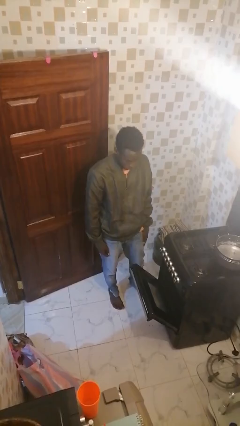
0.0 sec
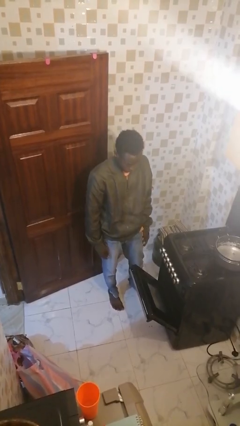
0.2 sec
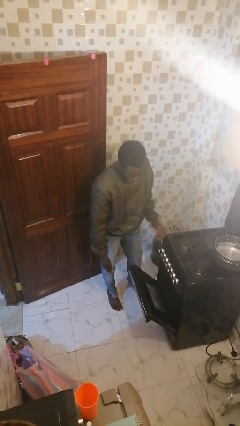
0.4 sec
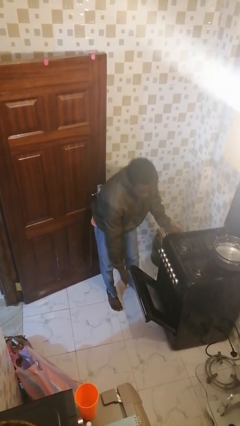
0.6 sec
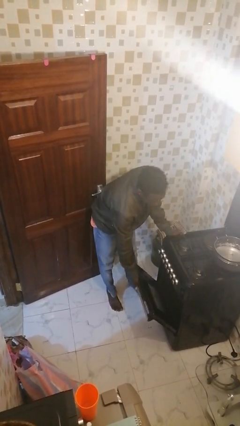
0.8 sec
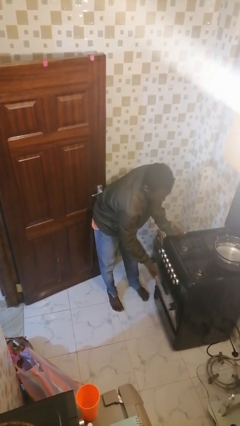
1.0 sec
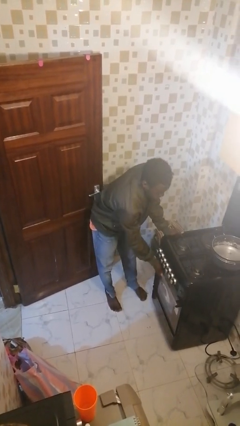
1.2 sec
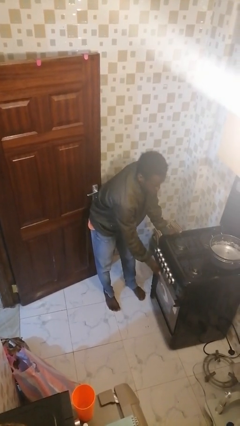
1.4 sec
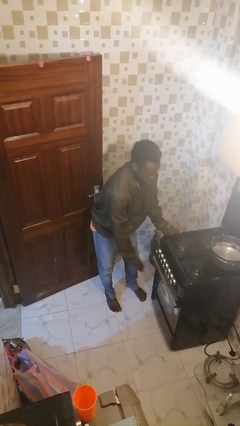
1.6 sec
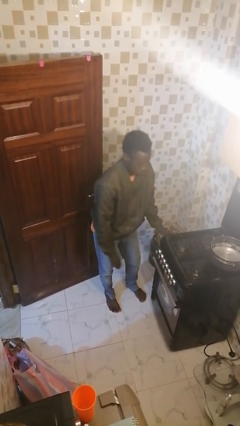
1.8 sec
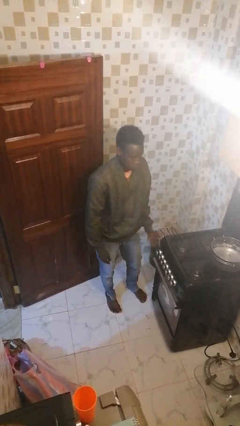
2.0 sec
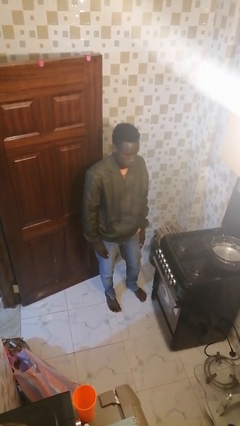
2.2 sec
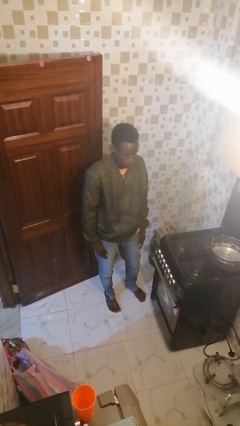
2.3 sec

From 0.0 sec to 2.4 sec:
person closes oven door

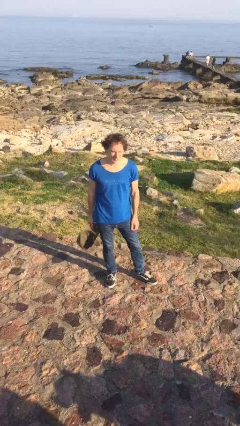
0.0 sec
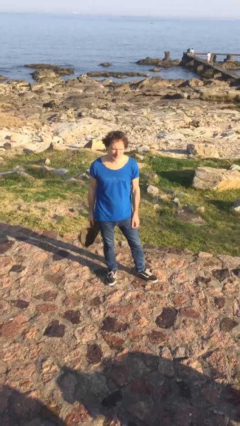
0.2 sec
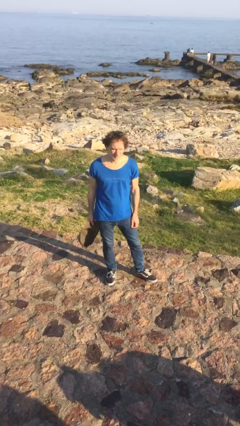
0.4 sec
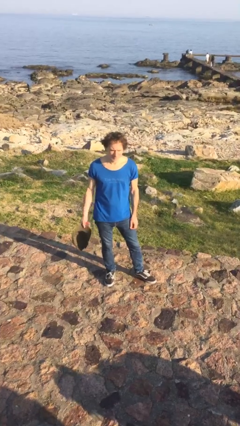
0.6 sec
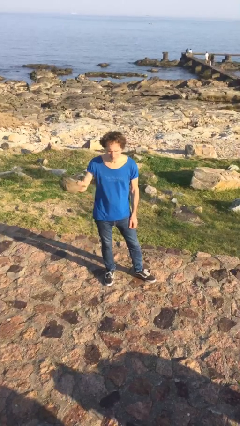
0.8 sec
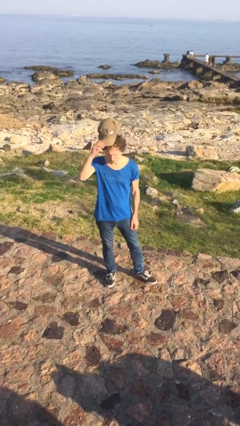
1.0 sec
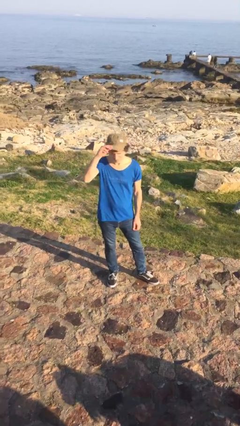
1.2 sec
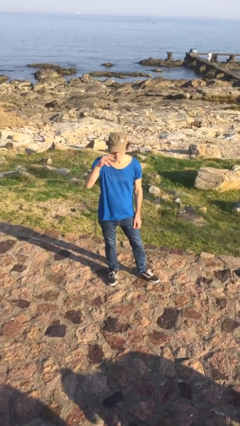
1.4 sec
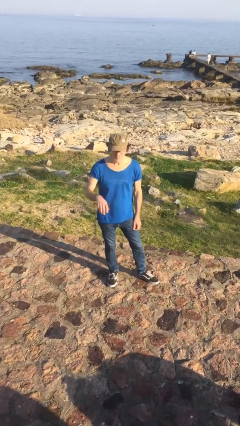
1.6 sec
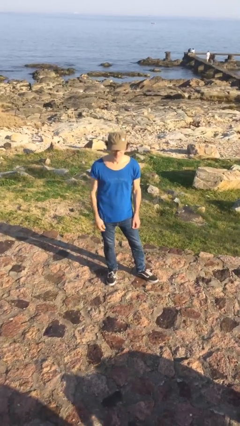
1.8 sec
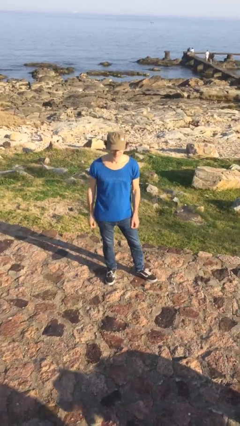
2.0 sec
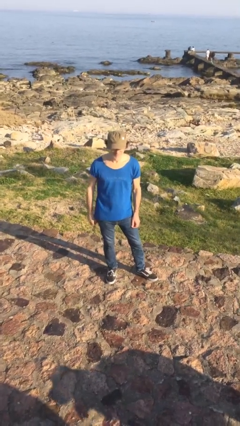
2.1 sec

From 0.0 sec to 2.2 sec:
person puts on hat

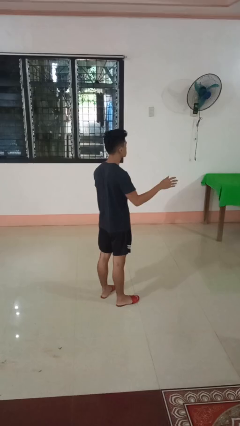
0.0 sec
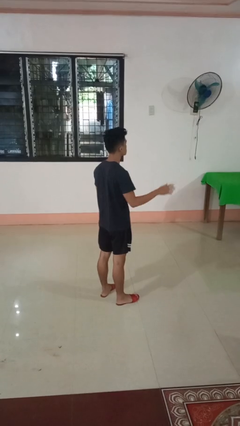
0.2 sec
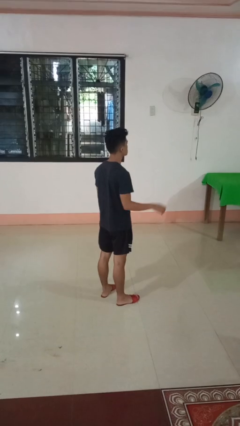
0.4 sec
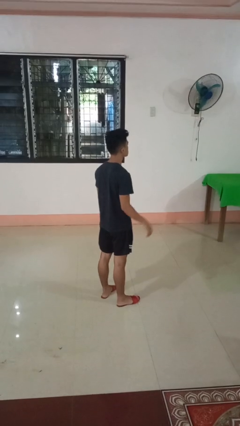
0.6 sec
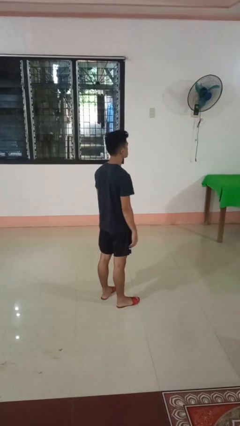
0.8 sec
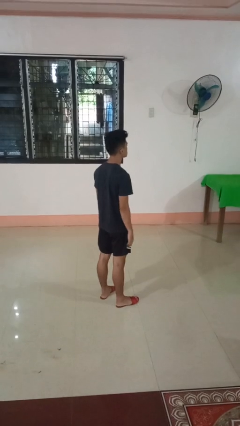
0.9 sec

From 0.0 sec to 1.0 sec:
person gestures swipe right

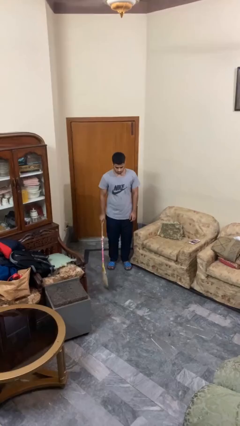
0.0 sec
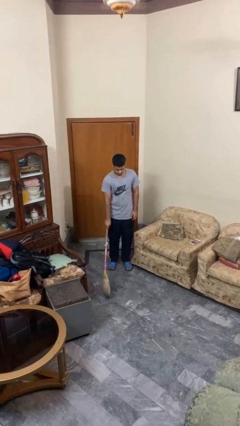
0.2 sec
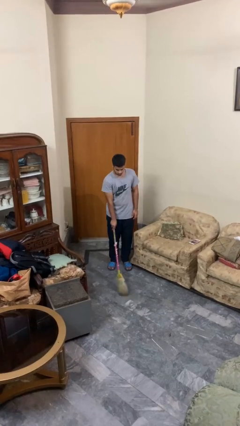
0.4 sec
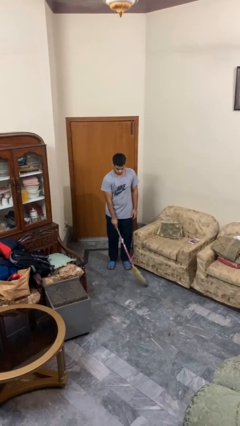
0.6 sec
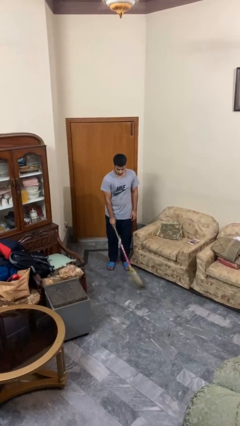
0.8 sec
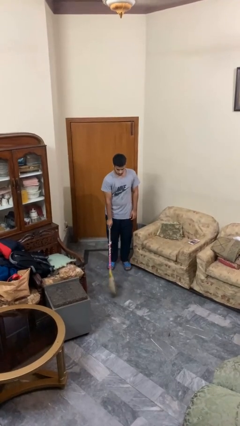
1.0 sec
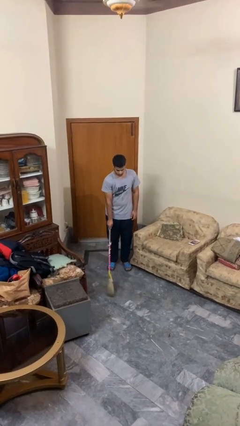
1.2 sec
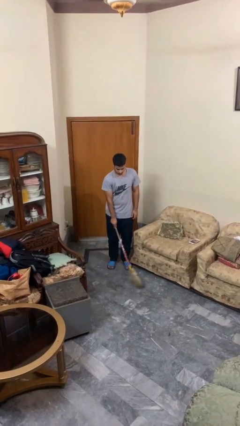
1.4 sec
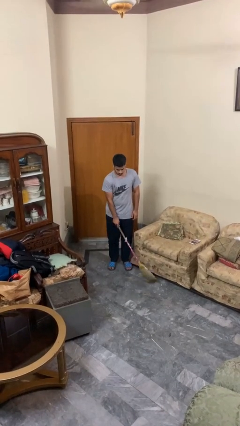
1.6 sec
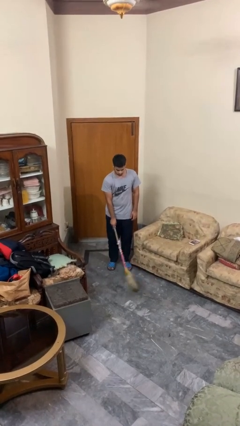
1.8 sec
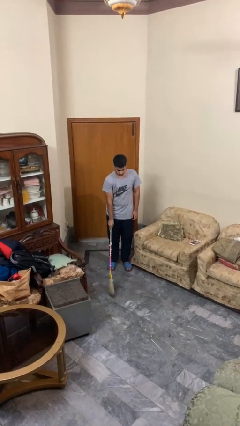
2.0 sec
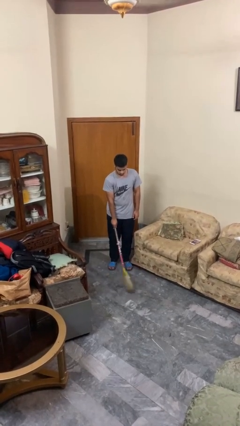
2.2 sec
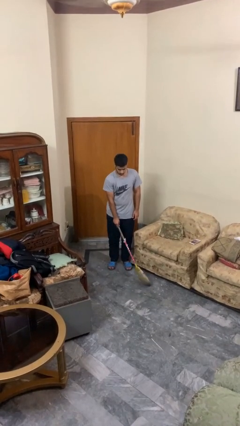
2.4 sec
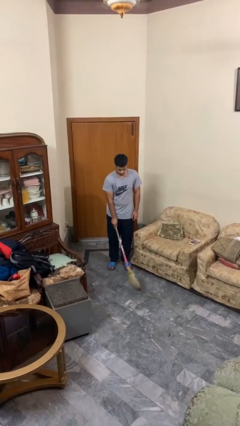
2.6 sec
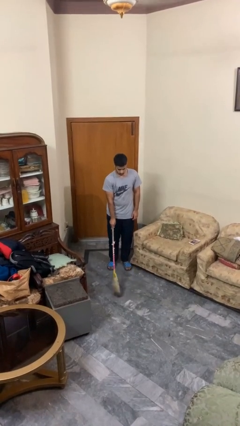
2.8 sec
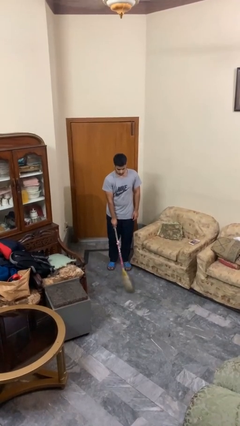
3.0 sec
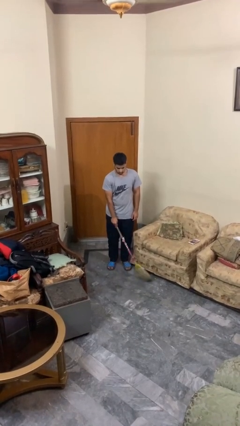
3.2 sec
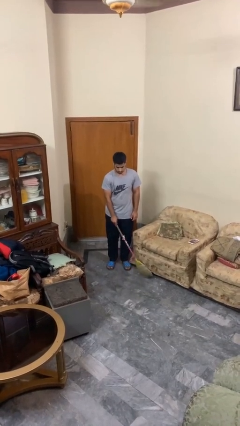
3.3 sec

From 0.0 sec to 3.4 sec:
person sweeps floor

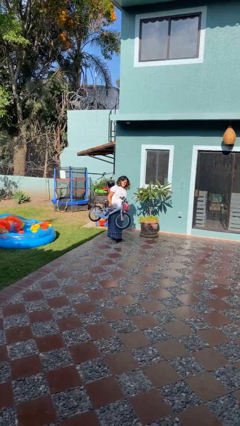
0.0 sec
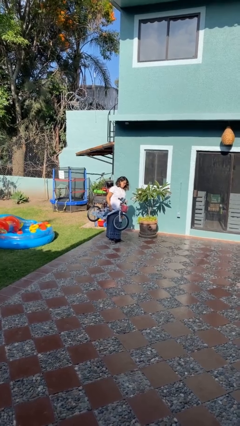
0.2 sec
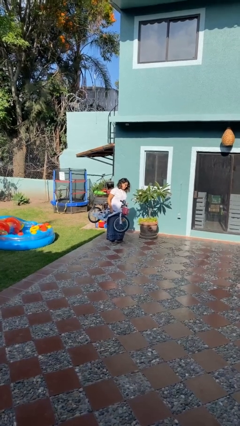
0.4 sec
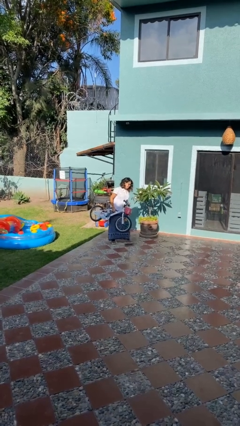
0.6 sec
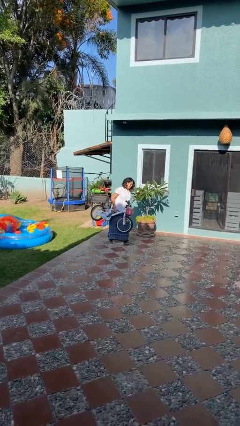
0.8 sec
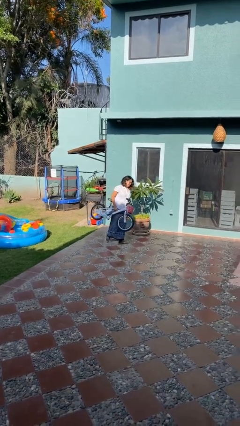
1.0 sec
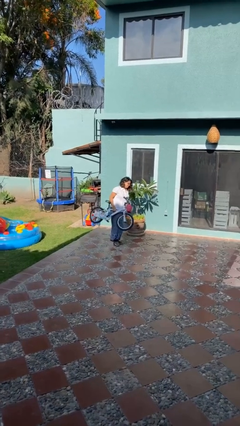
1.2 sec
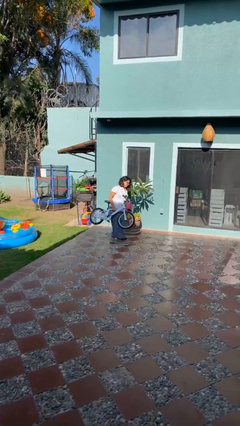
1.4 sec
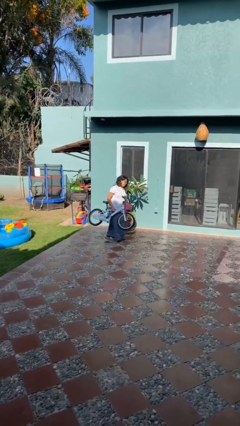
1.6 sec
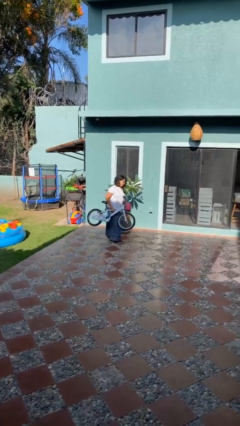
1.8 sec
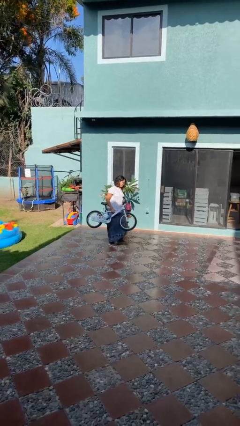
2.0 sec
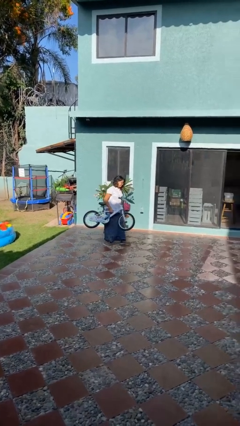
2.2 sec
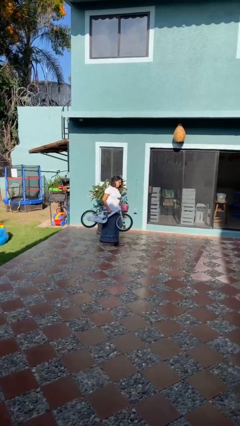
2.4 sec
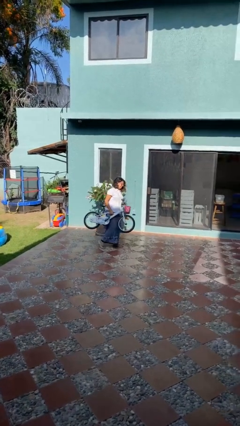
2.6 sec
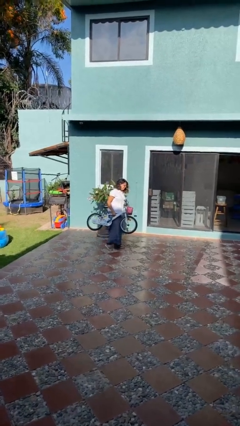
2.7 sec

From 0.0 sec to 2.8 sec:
person carries bicycle

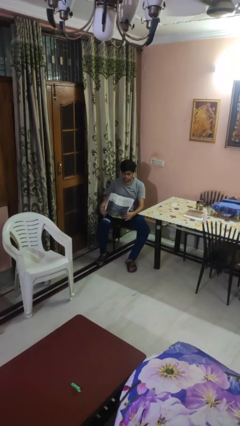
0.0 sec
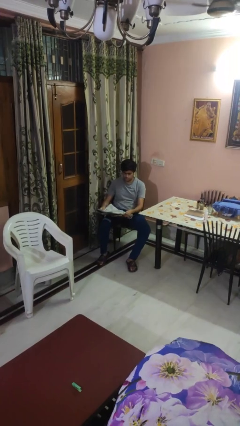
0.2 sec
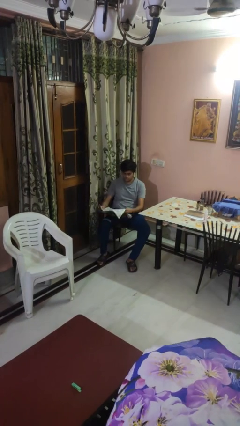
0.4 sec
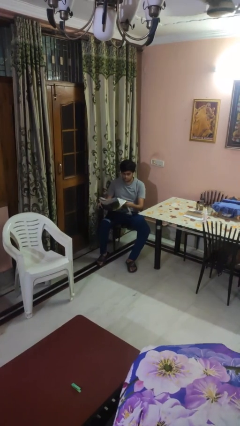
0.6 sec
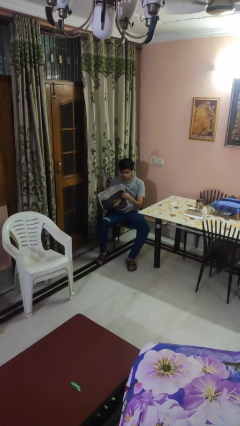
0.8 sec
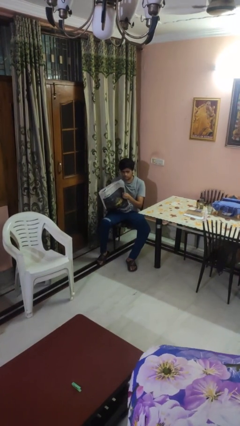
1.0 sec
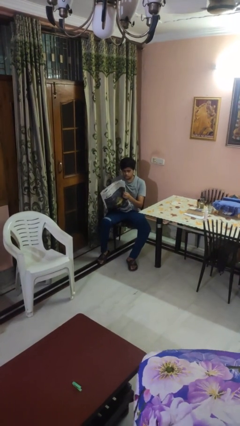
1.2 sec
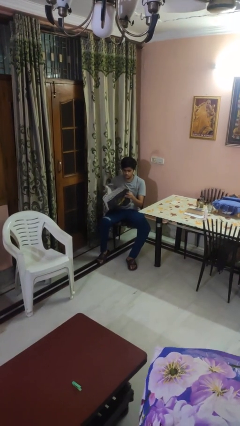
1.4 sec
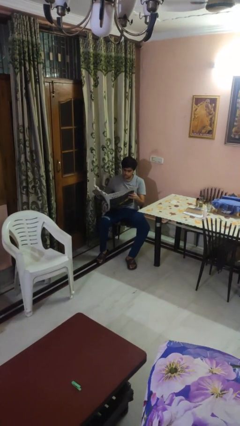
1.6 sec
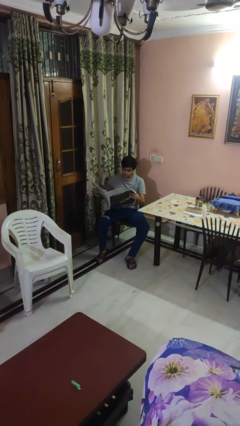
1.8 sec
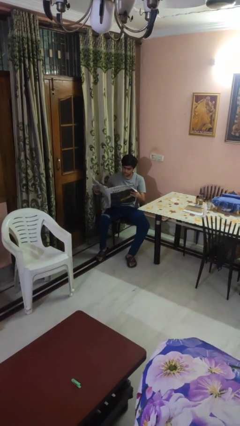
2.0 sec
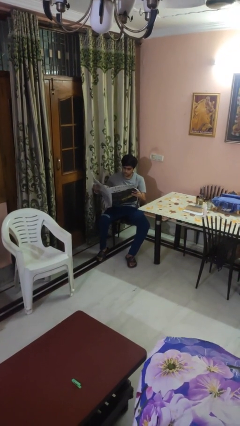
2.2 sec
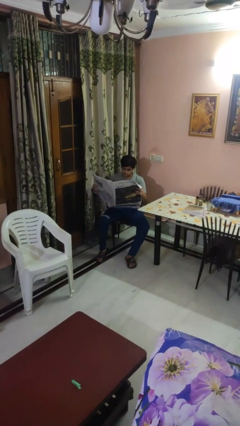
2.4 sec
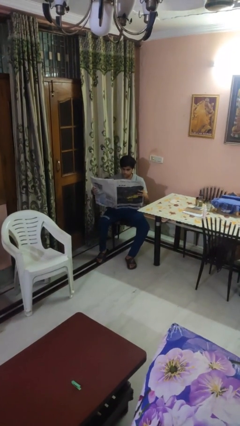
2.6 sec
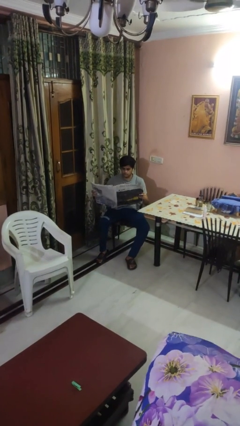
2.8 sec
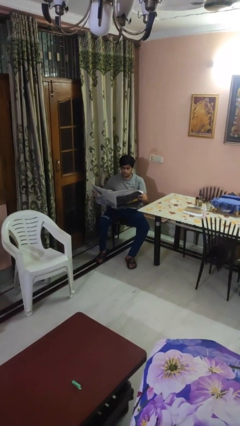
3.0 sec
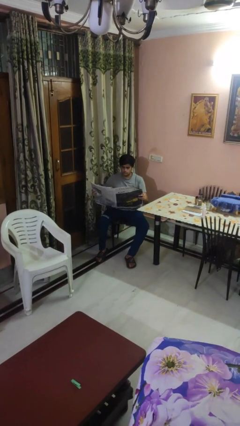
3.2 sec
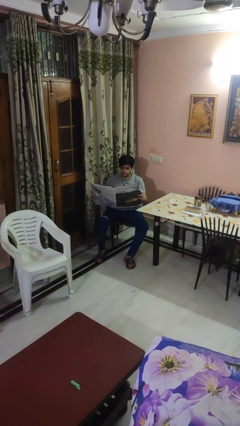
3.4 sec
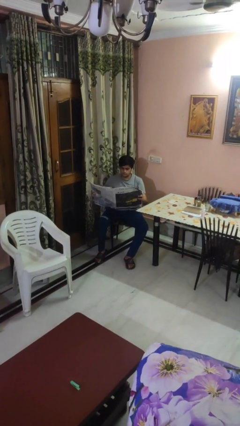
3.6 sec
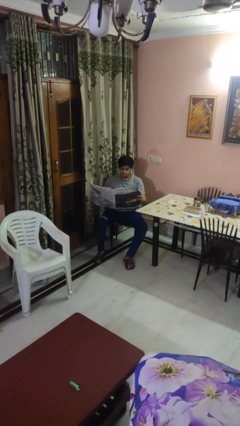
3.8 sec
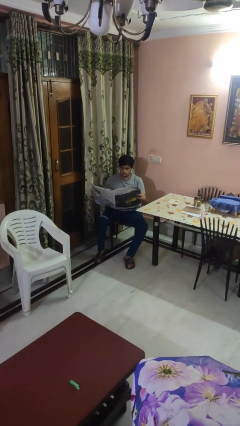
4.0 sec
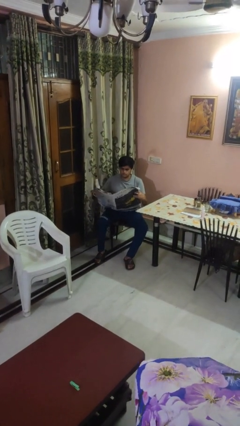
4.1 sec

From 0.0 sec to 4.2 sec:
person reads newspaper

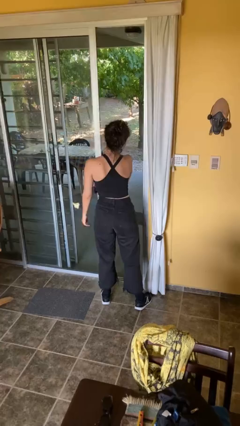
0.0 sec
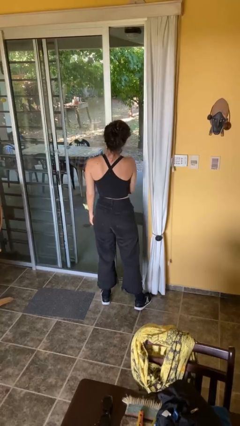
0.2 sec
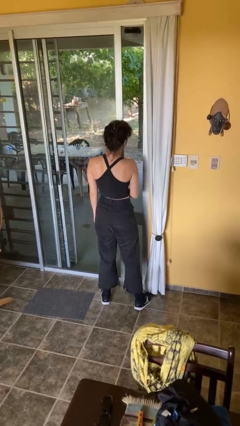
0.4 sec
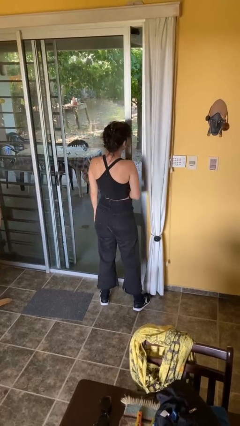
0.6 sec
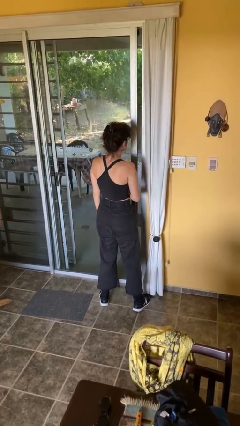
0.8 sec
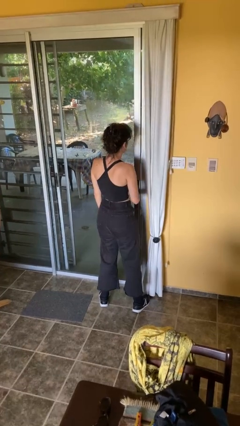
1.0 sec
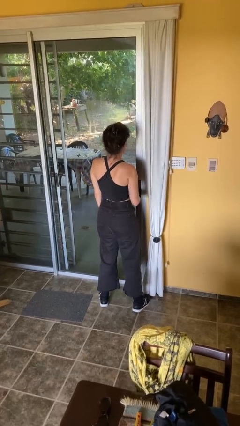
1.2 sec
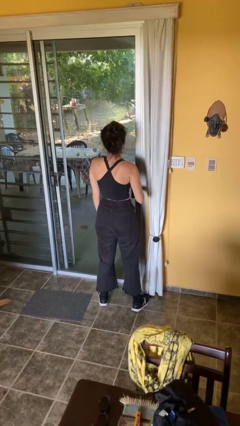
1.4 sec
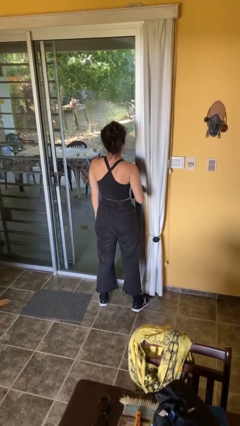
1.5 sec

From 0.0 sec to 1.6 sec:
person closes facility door
